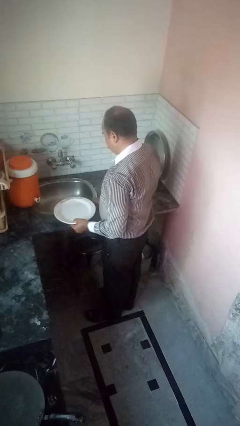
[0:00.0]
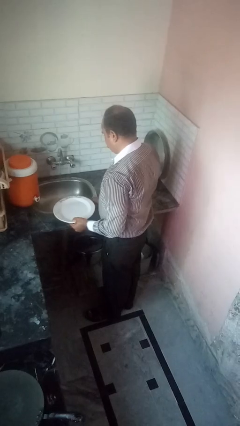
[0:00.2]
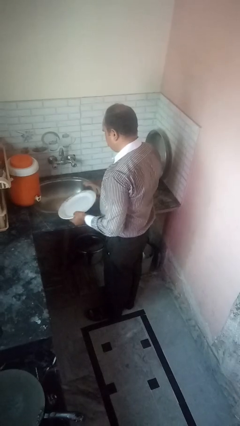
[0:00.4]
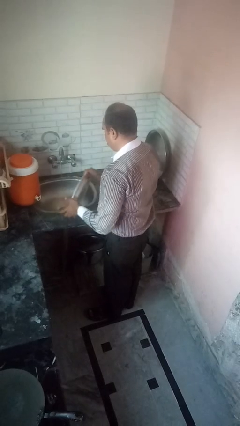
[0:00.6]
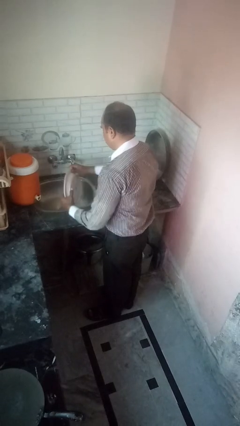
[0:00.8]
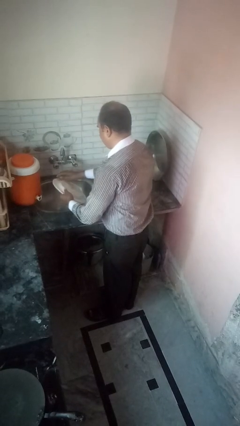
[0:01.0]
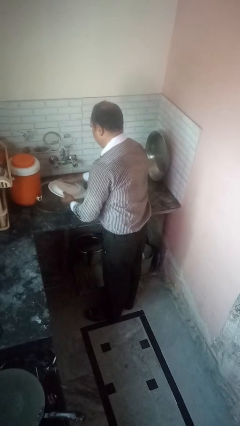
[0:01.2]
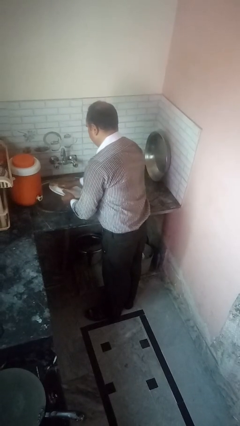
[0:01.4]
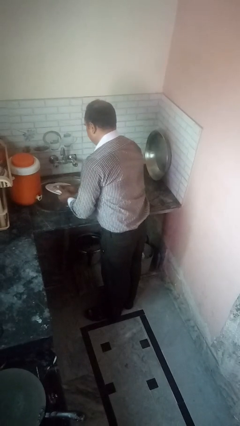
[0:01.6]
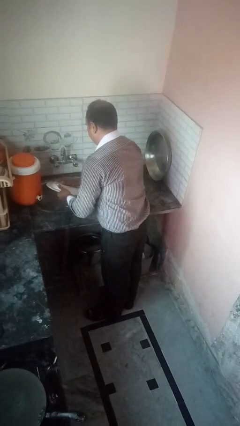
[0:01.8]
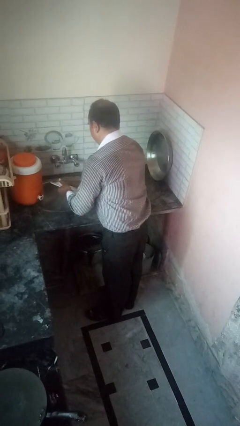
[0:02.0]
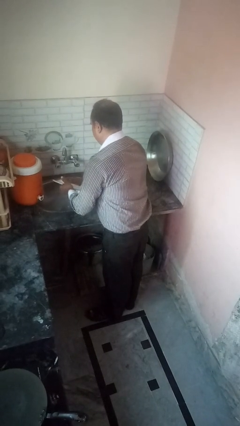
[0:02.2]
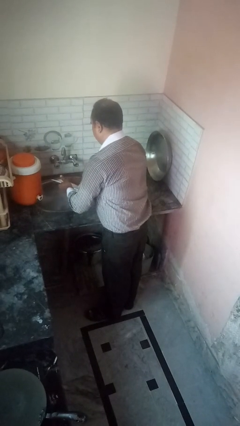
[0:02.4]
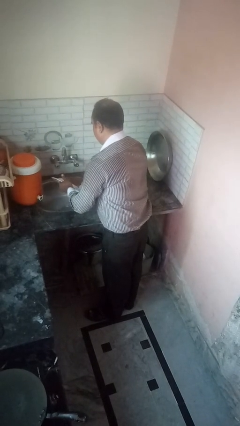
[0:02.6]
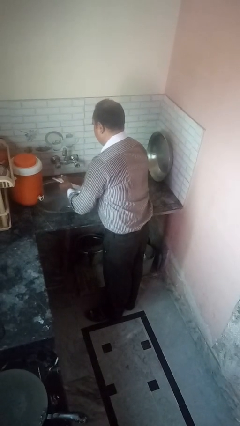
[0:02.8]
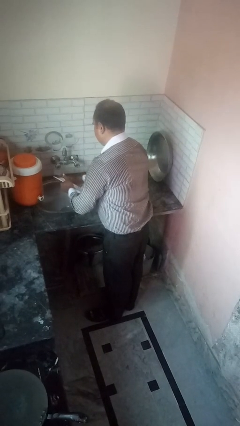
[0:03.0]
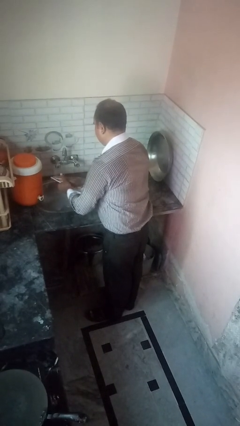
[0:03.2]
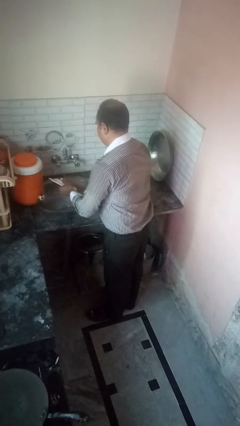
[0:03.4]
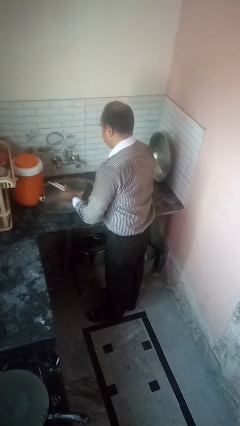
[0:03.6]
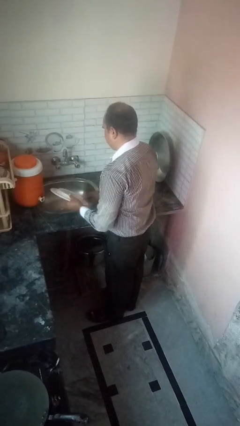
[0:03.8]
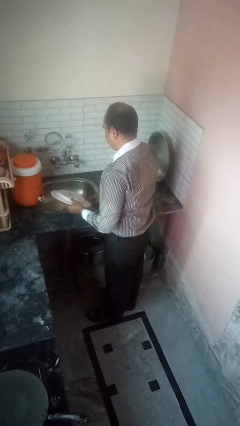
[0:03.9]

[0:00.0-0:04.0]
person washes dish

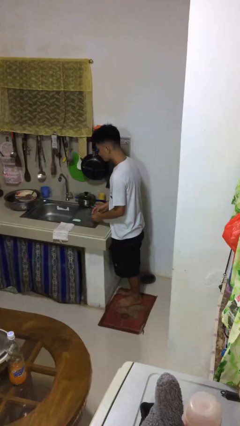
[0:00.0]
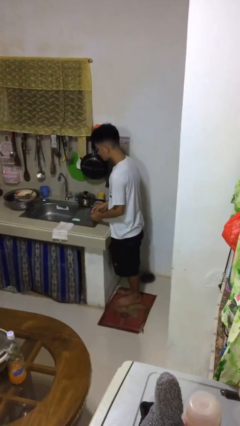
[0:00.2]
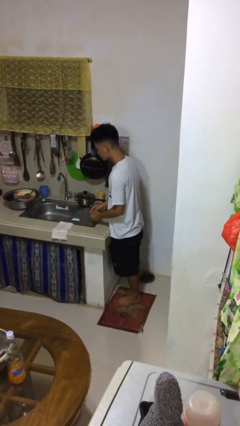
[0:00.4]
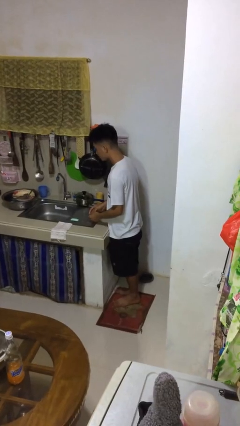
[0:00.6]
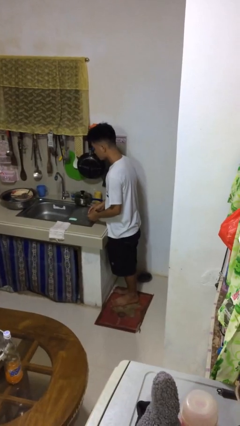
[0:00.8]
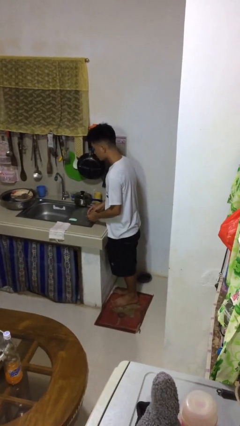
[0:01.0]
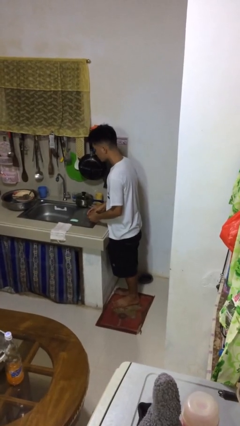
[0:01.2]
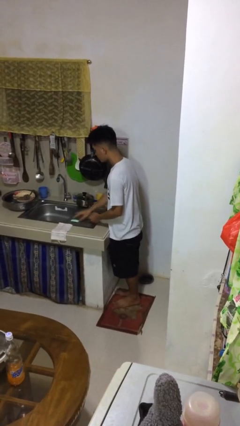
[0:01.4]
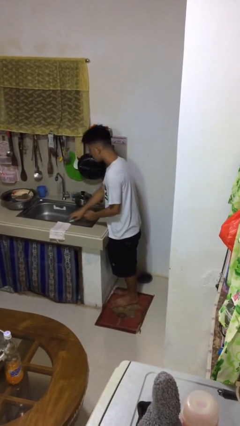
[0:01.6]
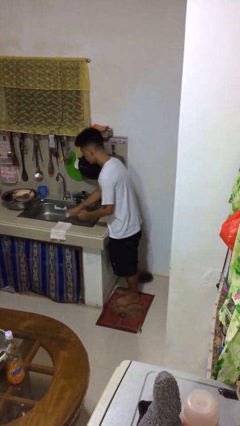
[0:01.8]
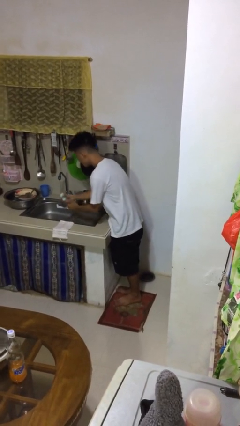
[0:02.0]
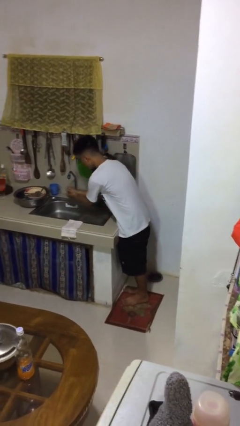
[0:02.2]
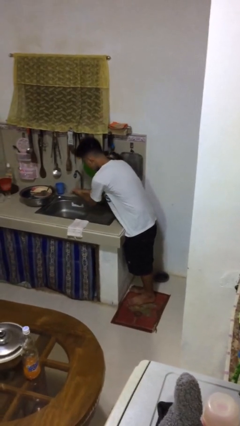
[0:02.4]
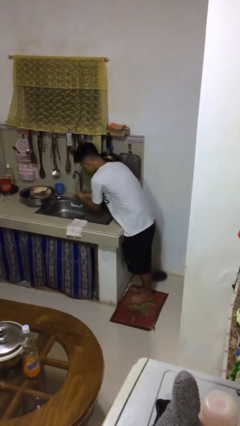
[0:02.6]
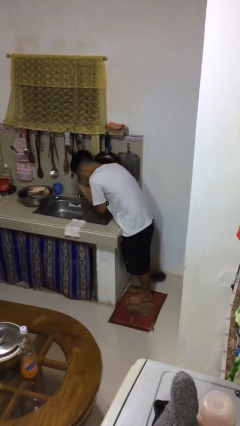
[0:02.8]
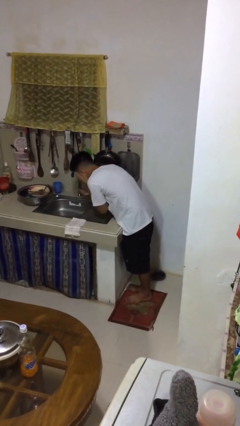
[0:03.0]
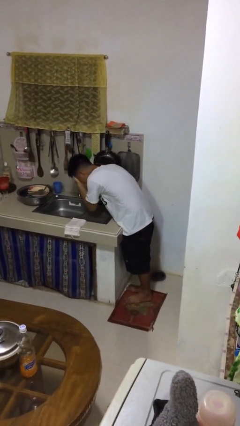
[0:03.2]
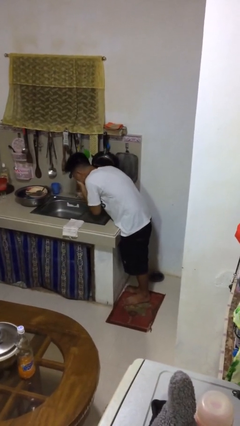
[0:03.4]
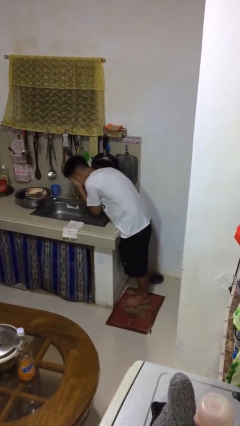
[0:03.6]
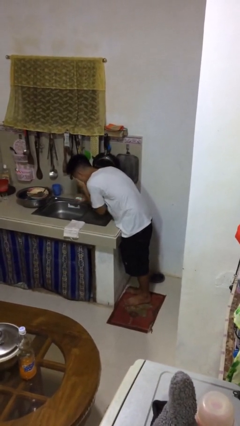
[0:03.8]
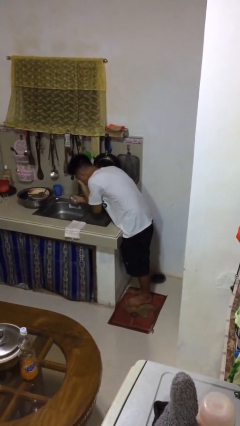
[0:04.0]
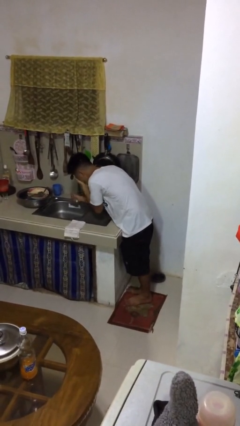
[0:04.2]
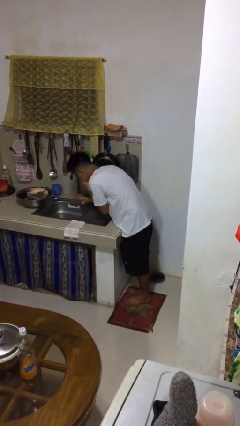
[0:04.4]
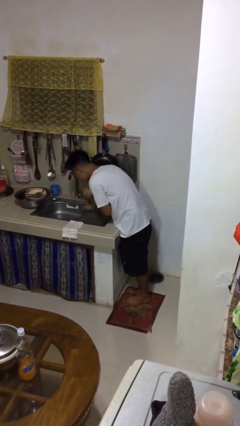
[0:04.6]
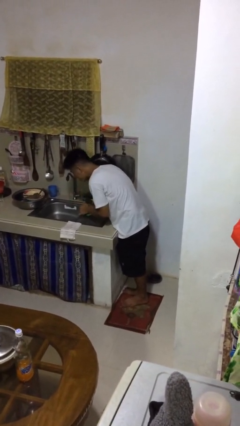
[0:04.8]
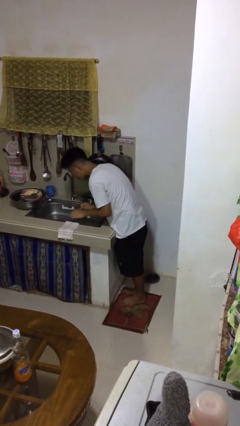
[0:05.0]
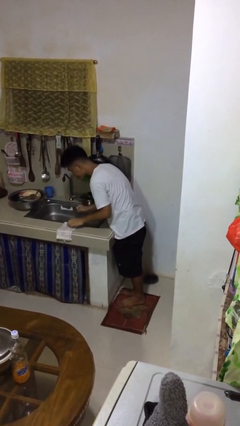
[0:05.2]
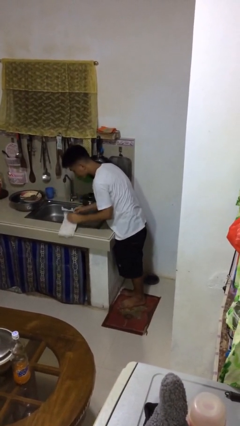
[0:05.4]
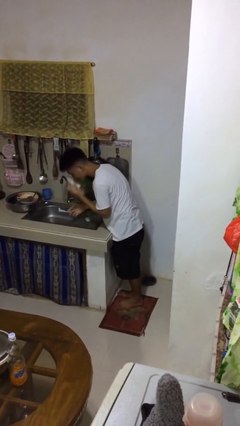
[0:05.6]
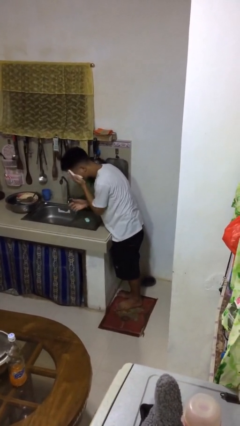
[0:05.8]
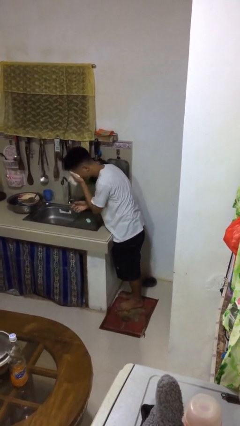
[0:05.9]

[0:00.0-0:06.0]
person washes face

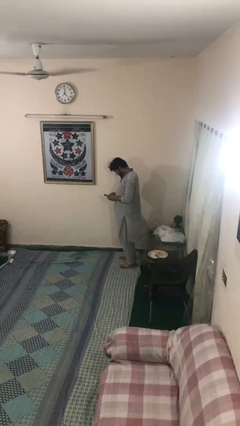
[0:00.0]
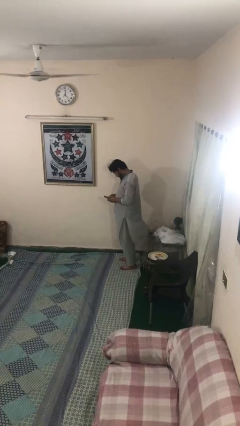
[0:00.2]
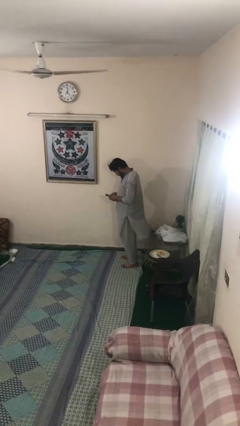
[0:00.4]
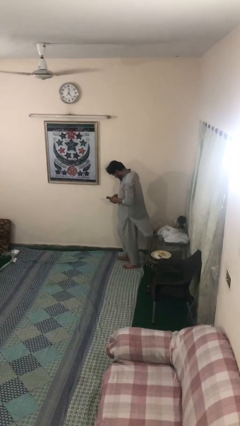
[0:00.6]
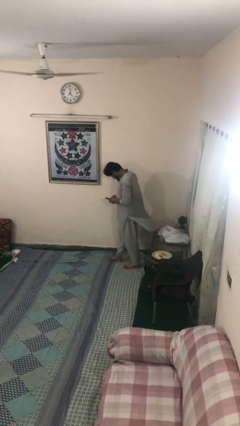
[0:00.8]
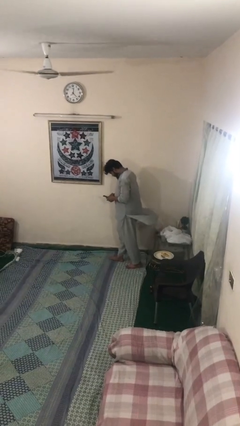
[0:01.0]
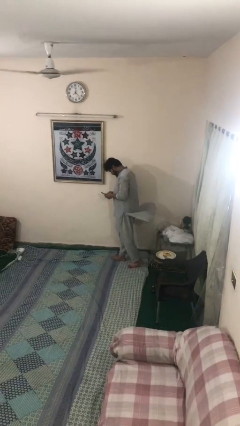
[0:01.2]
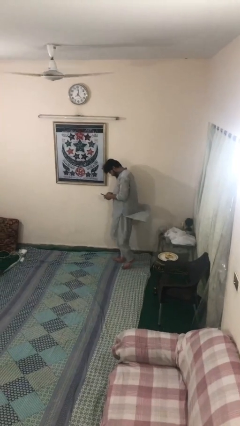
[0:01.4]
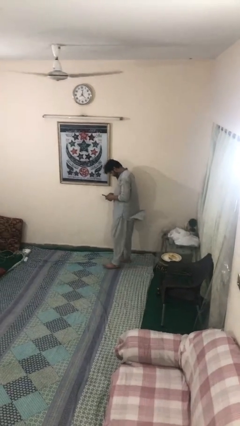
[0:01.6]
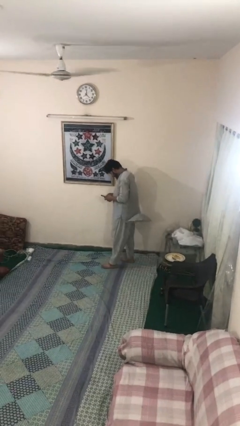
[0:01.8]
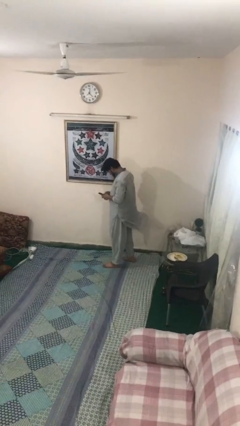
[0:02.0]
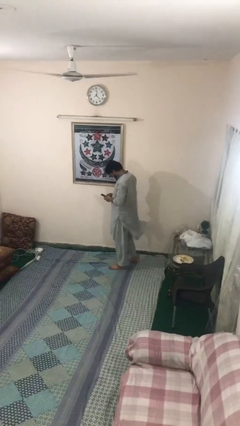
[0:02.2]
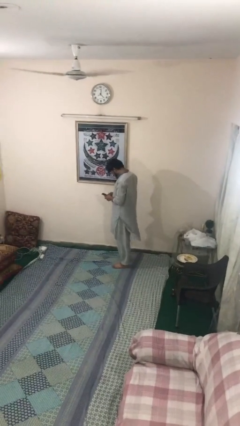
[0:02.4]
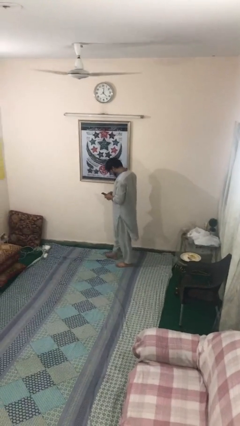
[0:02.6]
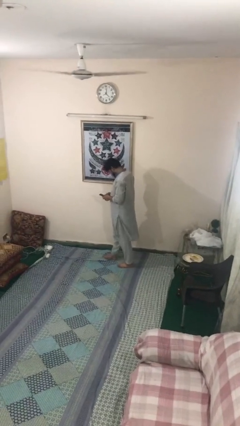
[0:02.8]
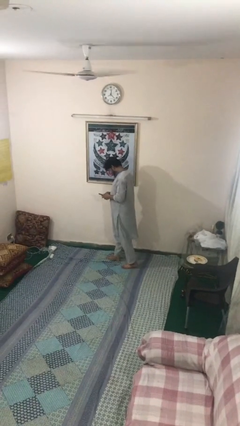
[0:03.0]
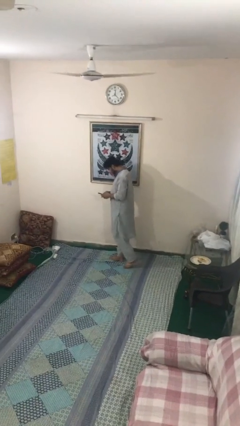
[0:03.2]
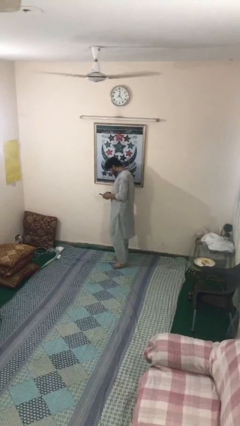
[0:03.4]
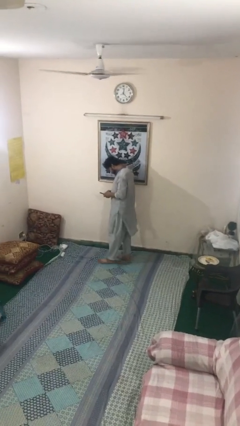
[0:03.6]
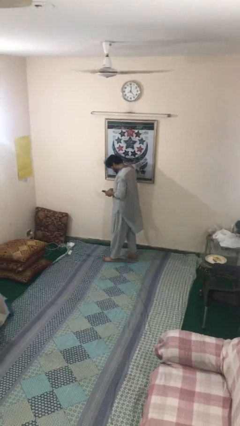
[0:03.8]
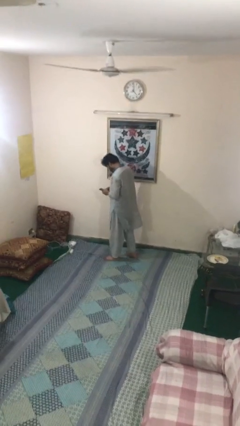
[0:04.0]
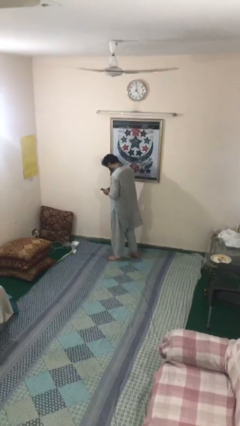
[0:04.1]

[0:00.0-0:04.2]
person texts on phone

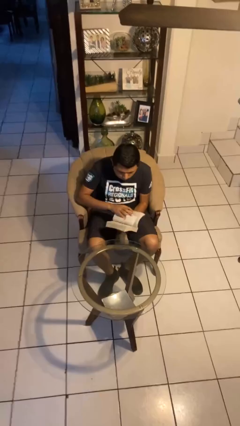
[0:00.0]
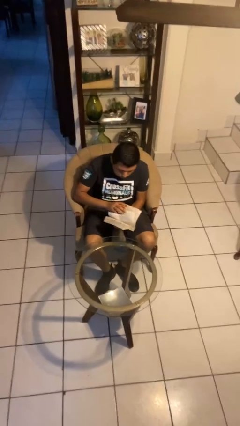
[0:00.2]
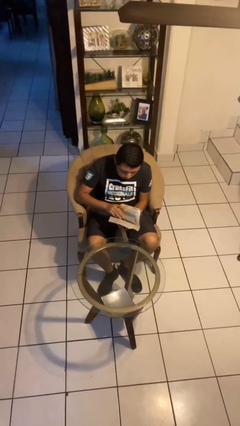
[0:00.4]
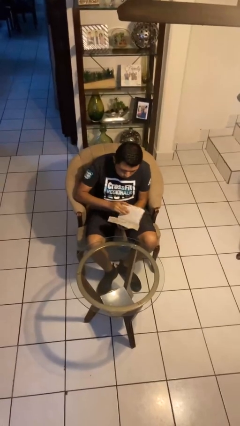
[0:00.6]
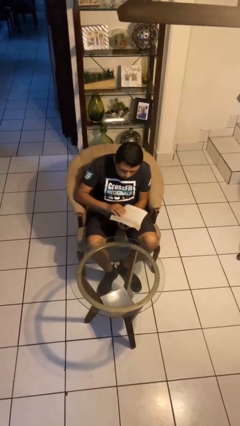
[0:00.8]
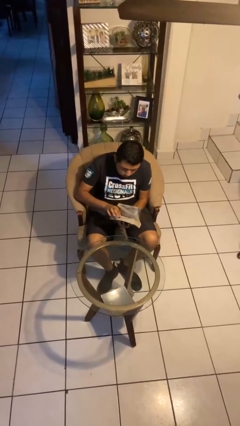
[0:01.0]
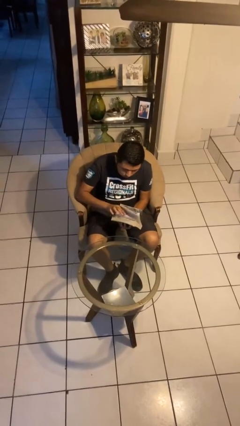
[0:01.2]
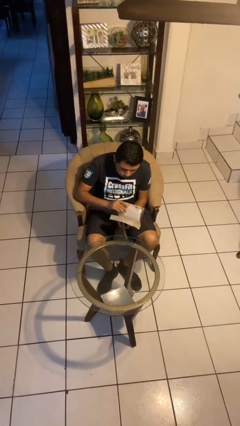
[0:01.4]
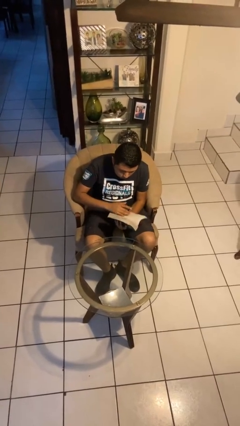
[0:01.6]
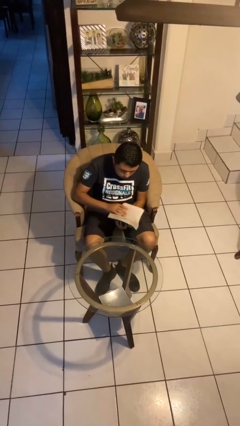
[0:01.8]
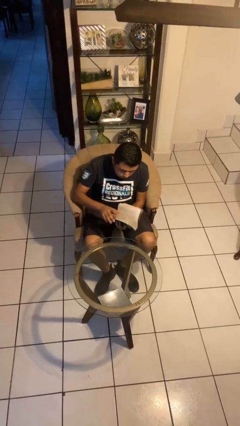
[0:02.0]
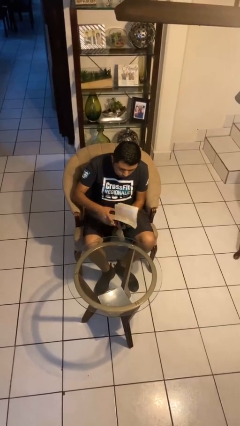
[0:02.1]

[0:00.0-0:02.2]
person reads book

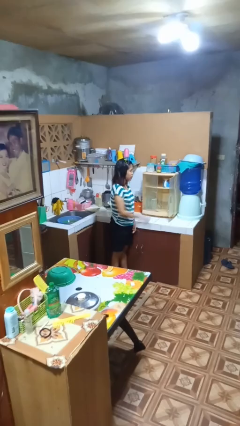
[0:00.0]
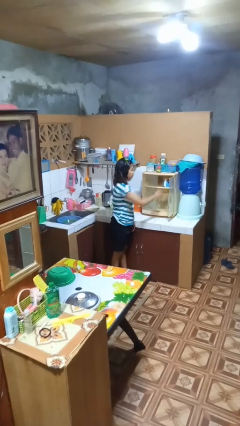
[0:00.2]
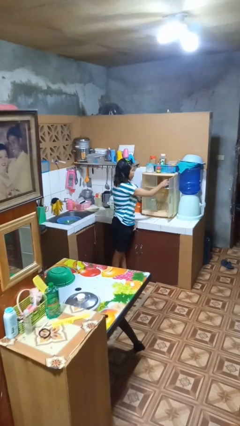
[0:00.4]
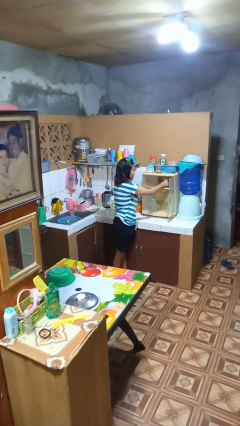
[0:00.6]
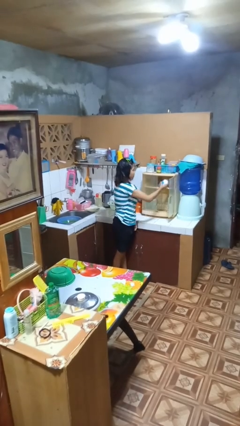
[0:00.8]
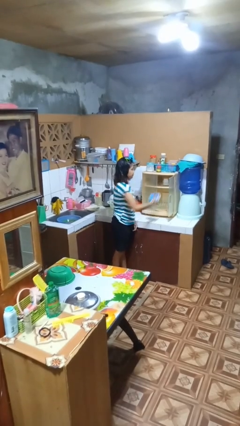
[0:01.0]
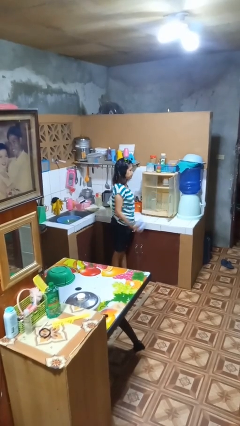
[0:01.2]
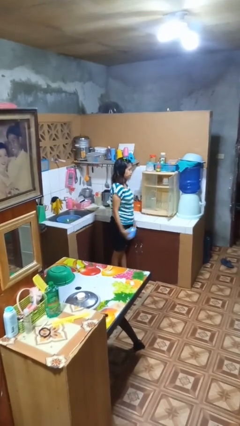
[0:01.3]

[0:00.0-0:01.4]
person takes object from cabinet
